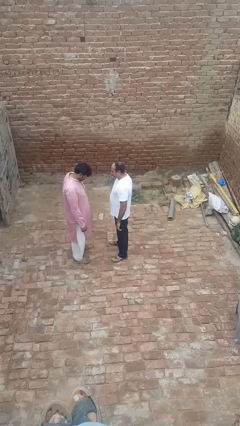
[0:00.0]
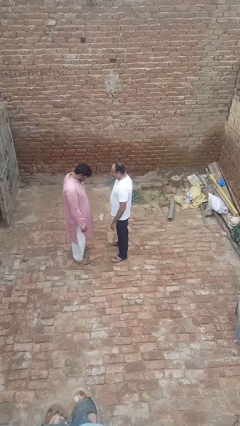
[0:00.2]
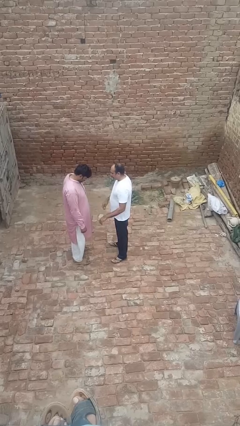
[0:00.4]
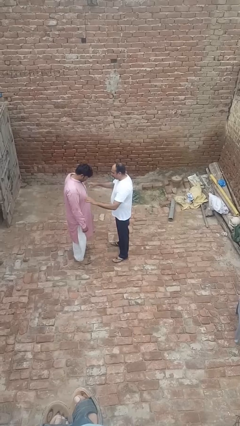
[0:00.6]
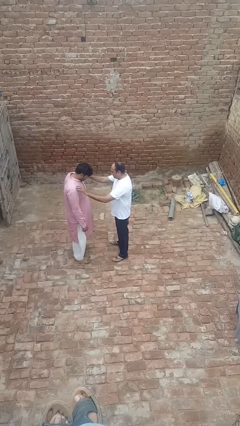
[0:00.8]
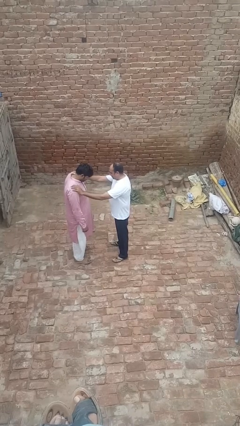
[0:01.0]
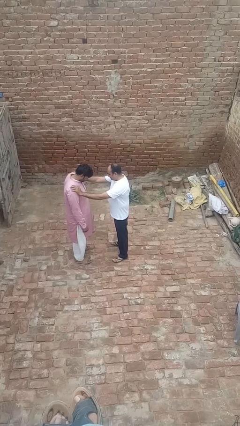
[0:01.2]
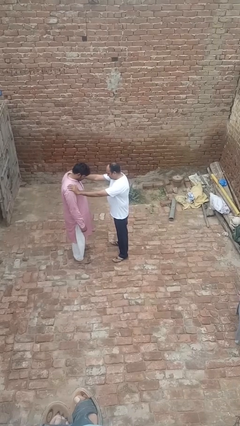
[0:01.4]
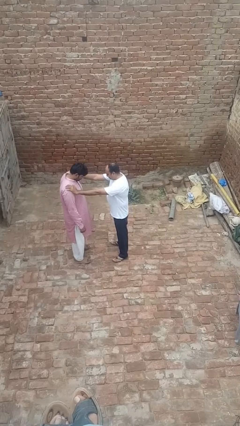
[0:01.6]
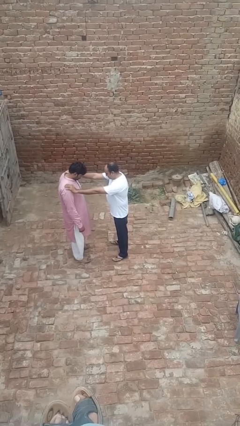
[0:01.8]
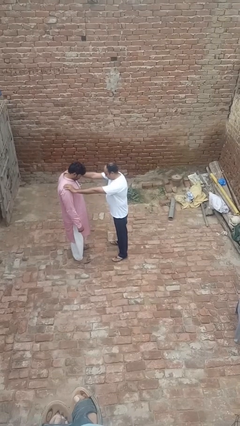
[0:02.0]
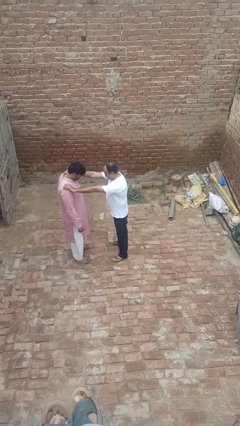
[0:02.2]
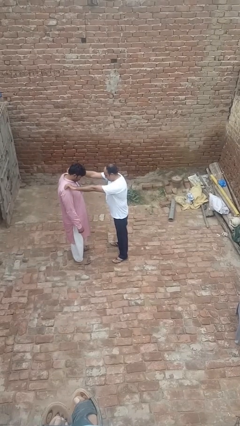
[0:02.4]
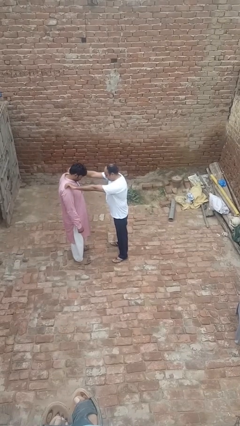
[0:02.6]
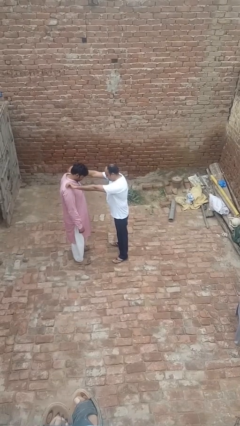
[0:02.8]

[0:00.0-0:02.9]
person shoves person

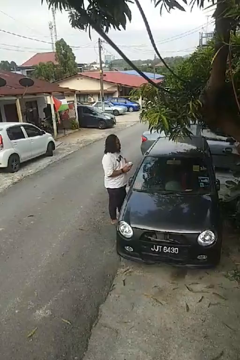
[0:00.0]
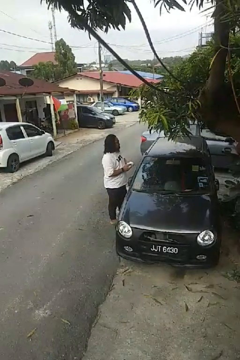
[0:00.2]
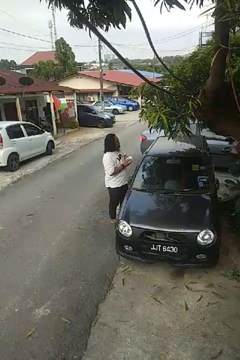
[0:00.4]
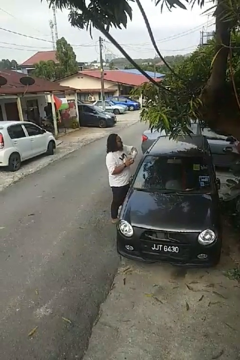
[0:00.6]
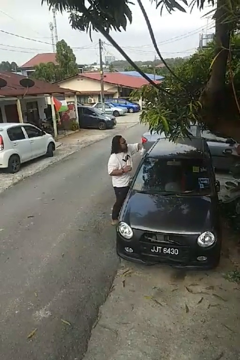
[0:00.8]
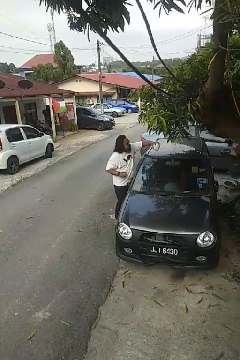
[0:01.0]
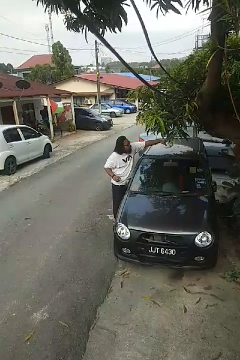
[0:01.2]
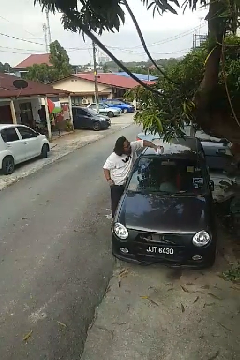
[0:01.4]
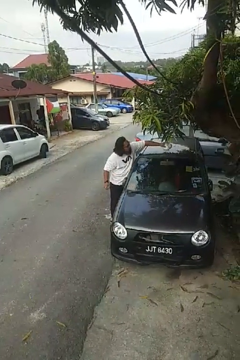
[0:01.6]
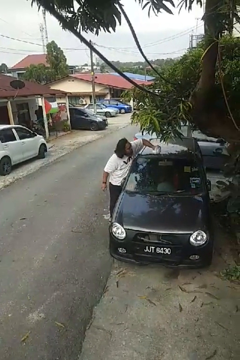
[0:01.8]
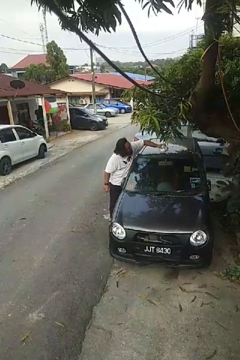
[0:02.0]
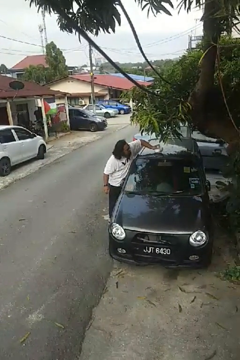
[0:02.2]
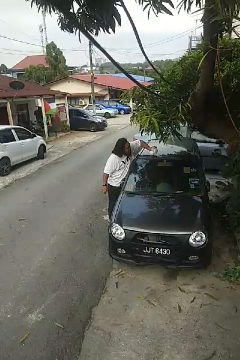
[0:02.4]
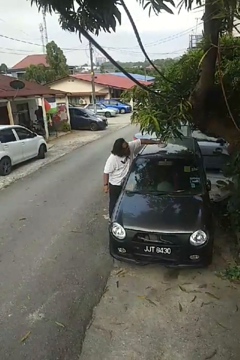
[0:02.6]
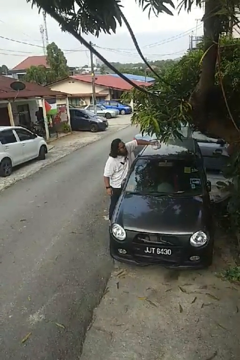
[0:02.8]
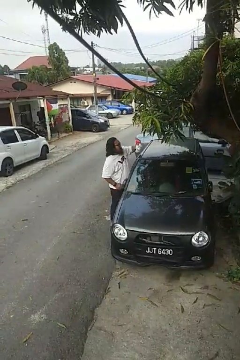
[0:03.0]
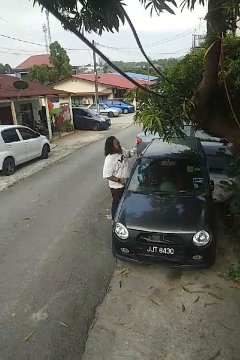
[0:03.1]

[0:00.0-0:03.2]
person polishes car with rag

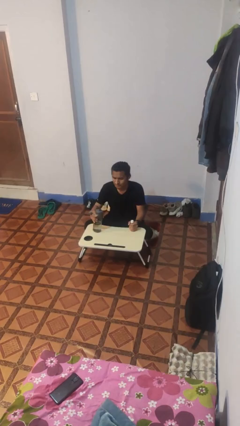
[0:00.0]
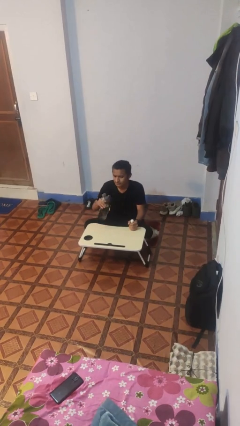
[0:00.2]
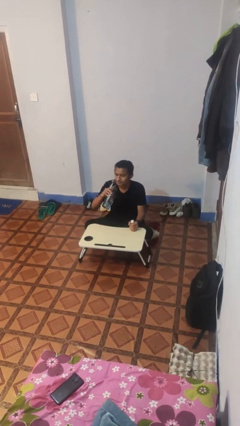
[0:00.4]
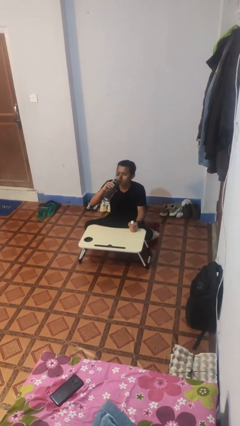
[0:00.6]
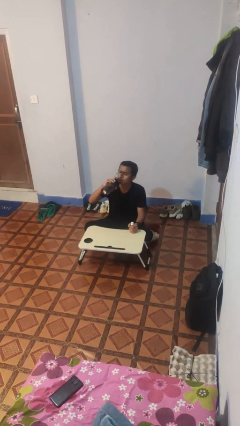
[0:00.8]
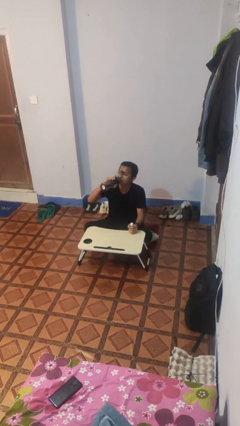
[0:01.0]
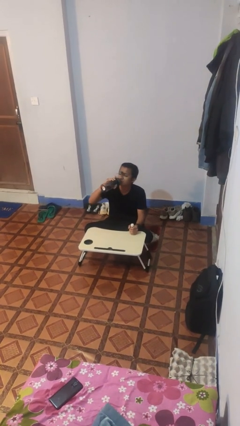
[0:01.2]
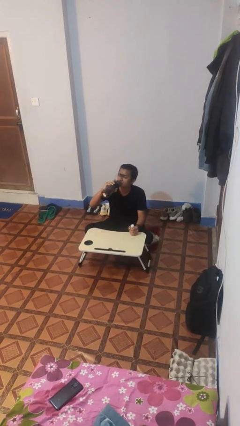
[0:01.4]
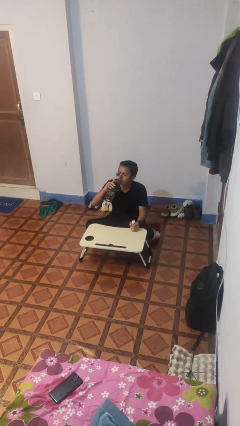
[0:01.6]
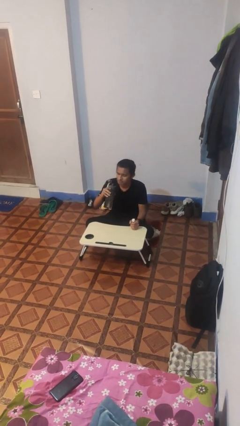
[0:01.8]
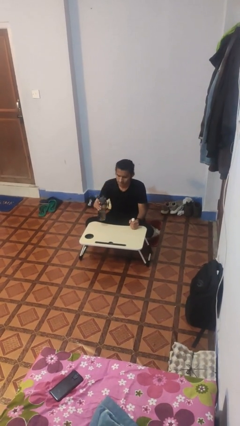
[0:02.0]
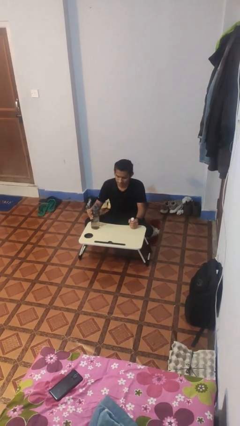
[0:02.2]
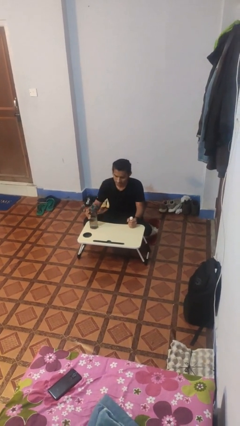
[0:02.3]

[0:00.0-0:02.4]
person drinks from cup

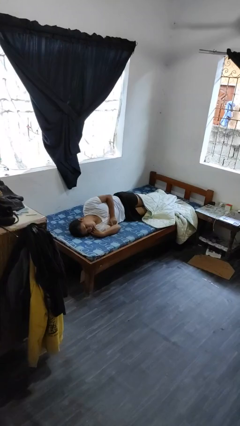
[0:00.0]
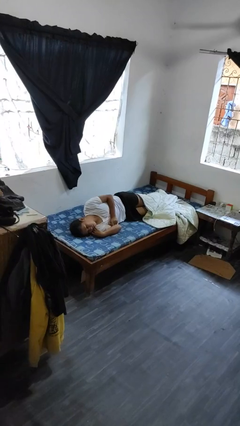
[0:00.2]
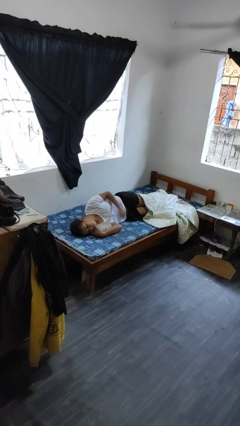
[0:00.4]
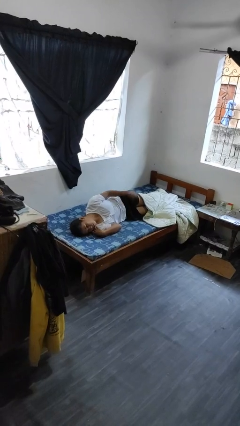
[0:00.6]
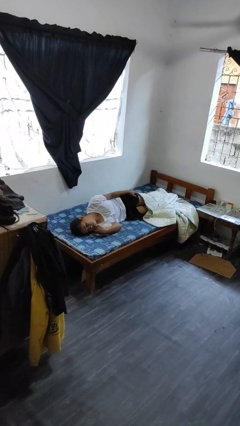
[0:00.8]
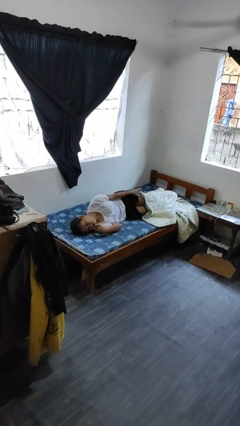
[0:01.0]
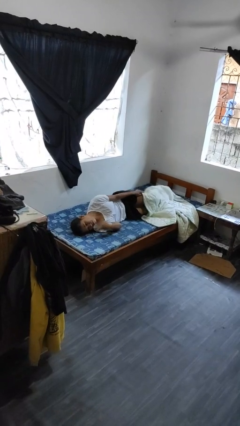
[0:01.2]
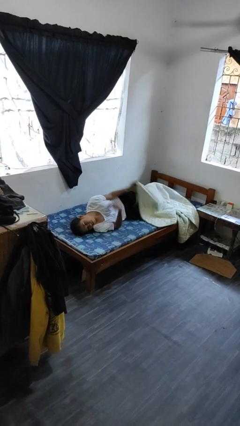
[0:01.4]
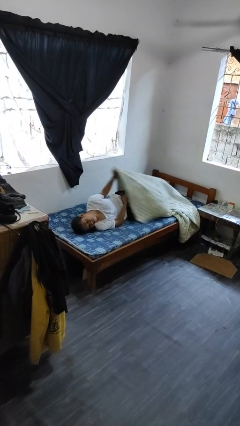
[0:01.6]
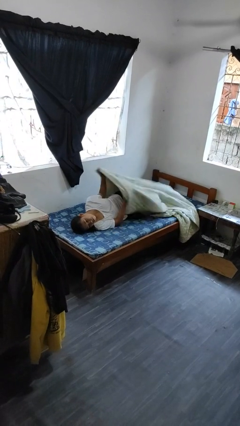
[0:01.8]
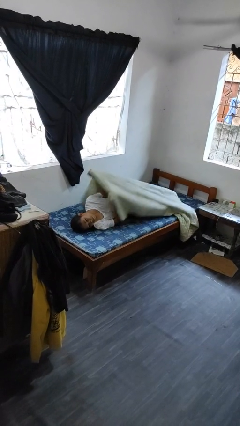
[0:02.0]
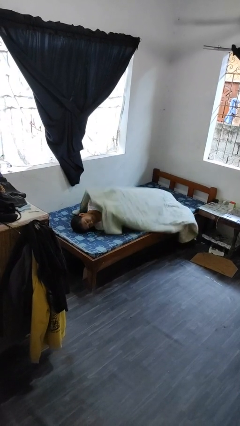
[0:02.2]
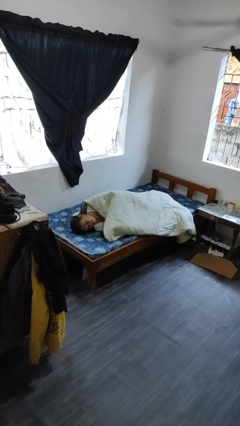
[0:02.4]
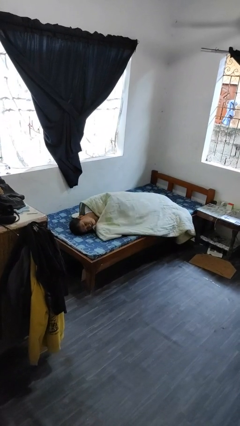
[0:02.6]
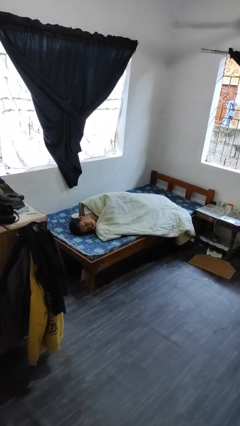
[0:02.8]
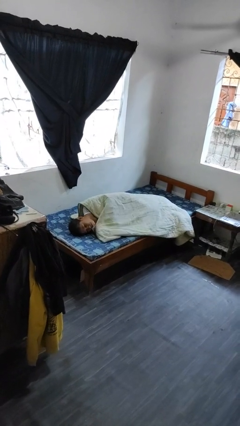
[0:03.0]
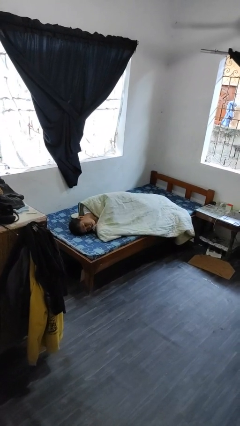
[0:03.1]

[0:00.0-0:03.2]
person covers with bedsheets

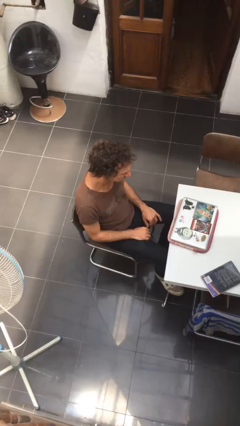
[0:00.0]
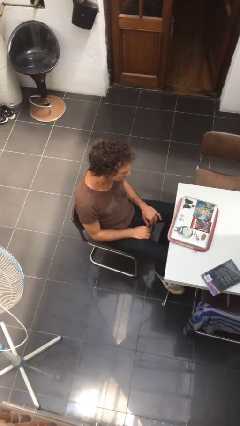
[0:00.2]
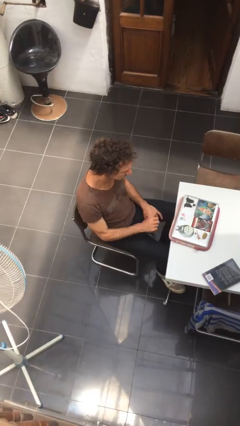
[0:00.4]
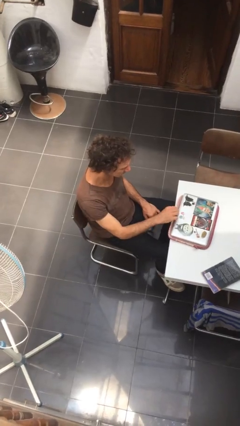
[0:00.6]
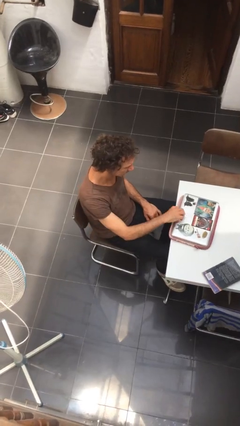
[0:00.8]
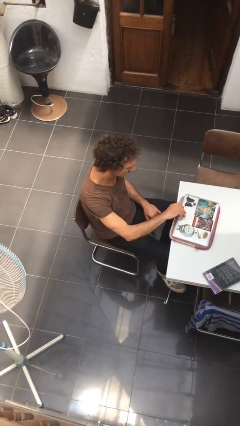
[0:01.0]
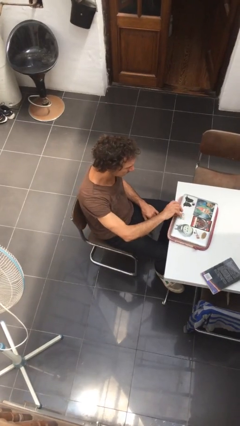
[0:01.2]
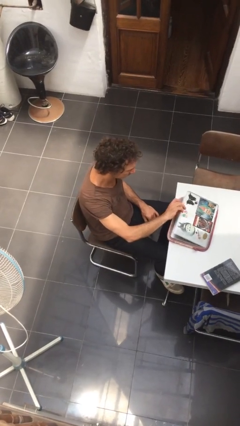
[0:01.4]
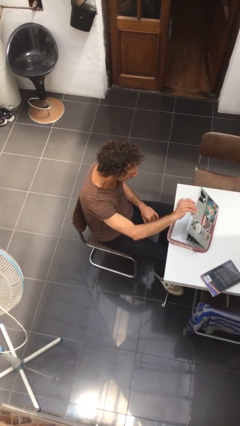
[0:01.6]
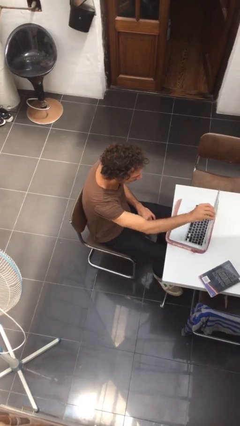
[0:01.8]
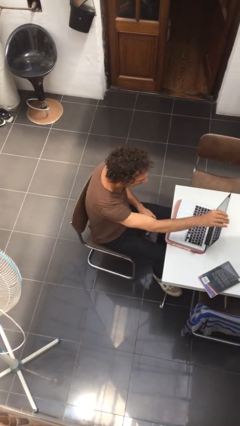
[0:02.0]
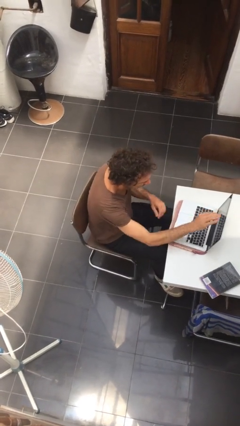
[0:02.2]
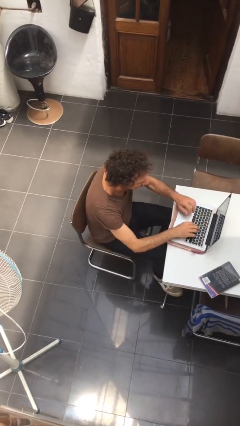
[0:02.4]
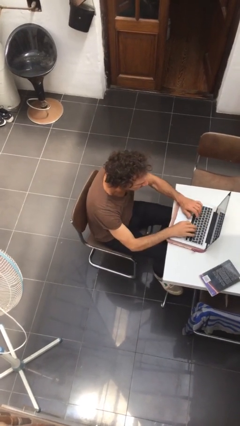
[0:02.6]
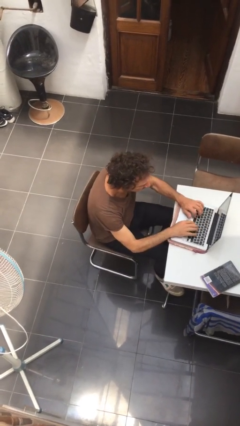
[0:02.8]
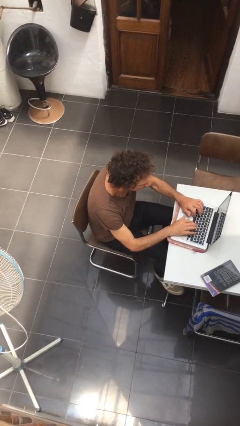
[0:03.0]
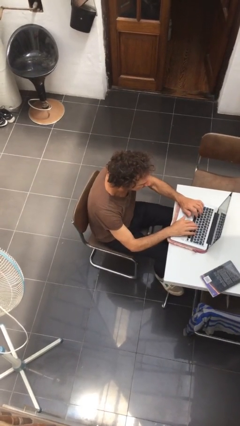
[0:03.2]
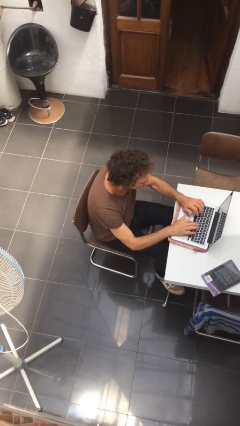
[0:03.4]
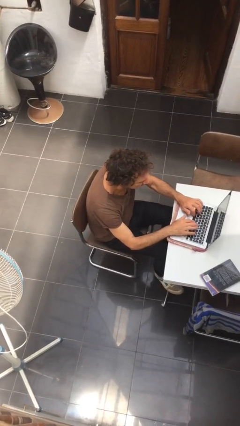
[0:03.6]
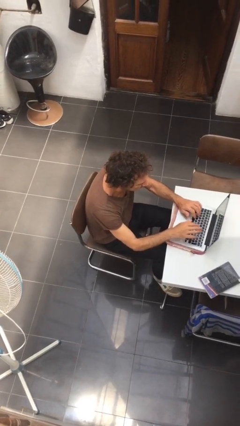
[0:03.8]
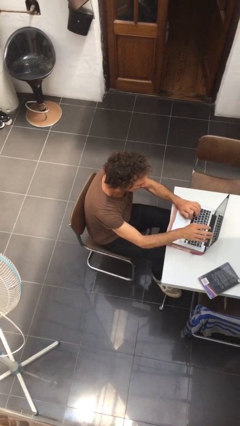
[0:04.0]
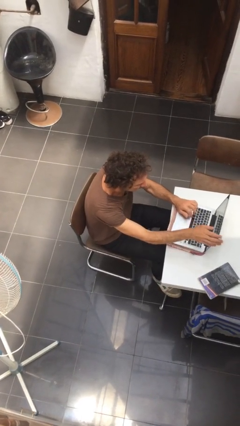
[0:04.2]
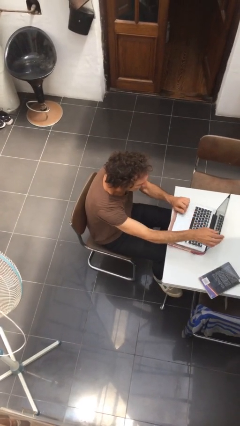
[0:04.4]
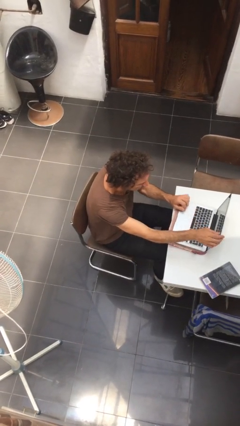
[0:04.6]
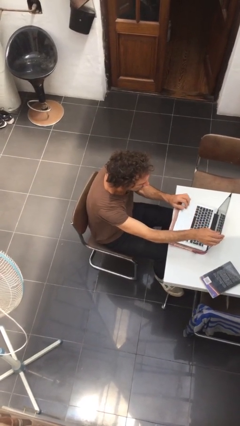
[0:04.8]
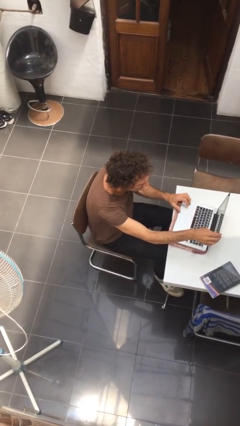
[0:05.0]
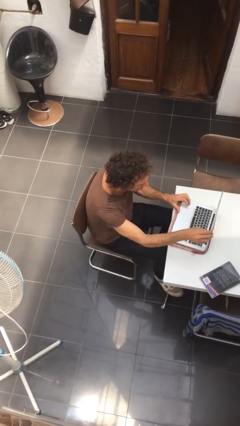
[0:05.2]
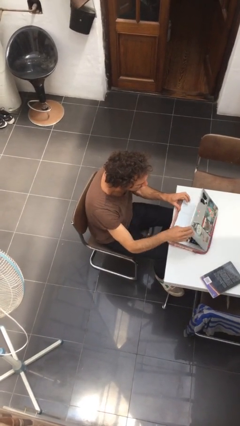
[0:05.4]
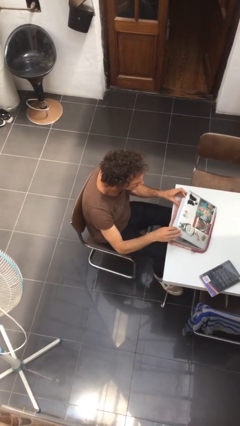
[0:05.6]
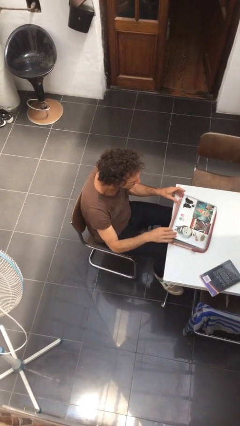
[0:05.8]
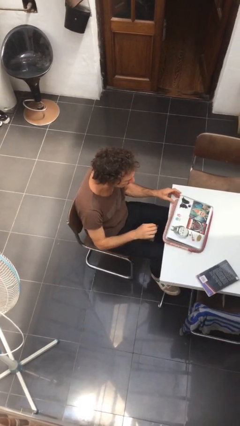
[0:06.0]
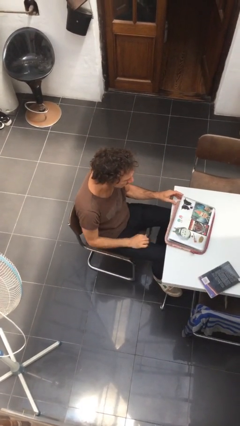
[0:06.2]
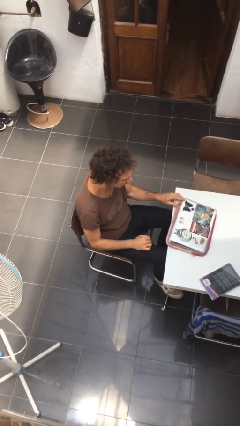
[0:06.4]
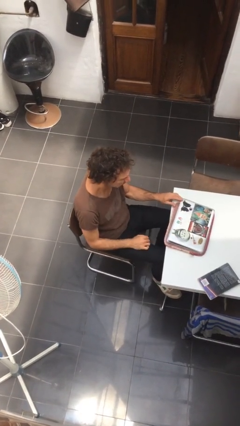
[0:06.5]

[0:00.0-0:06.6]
person interacts with laptop
